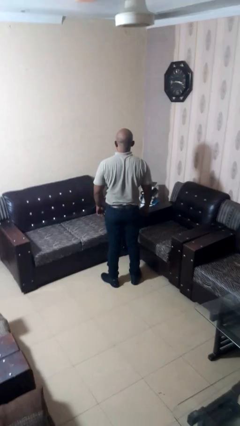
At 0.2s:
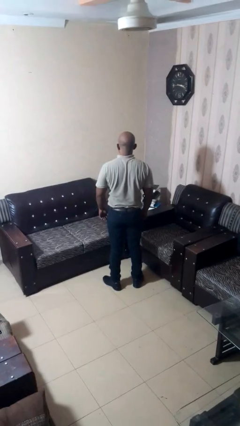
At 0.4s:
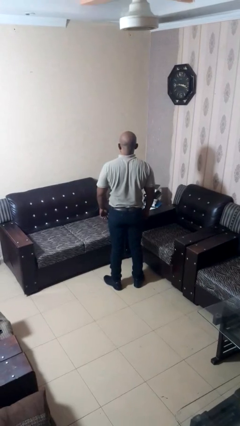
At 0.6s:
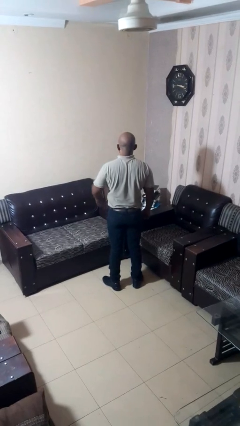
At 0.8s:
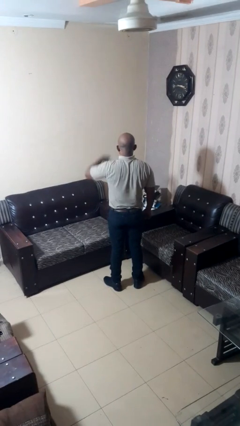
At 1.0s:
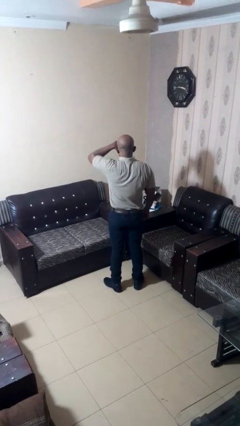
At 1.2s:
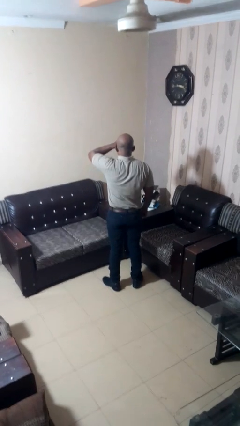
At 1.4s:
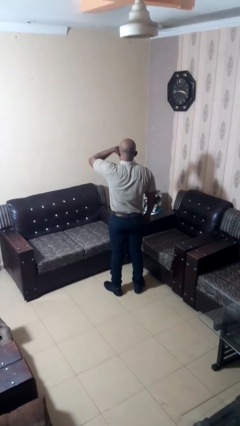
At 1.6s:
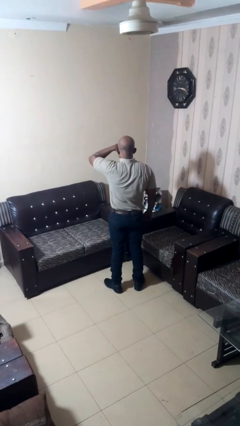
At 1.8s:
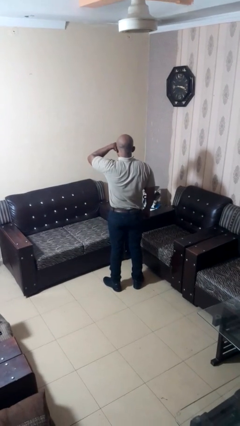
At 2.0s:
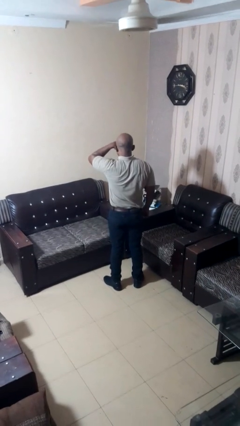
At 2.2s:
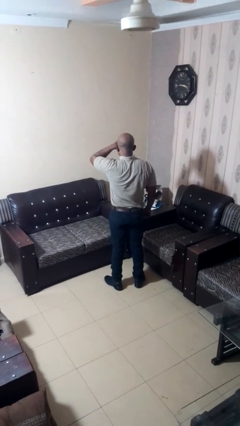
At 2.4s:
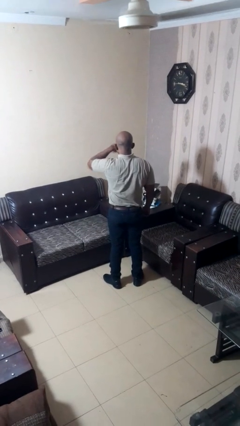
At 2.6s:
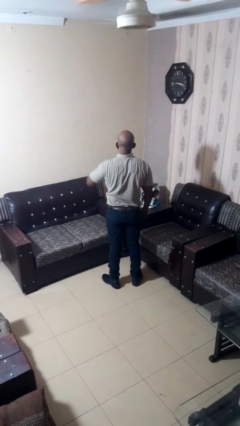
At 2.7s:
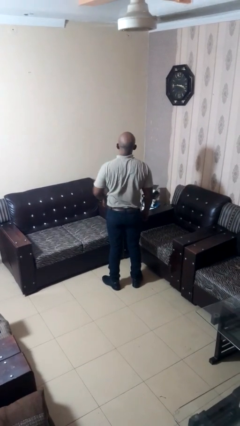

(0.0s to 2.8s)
person rubs eyes

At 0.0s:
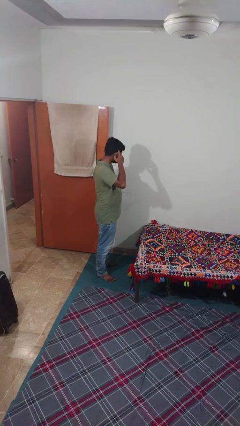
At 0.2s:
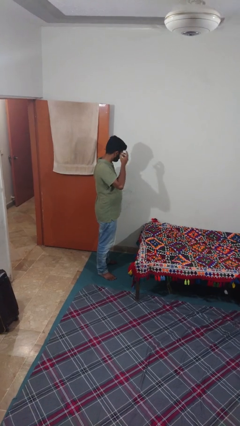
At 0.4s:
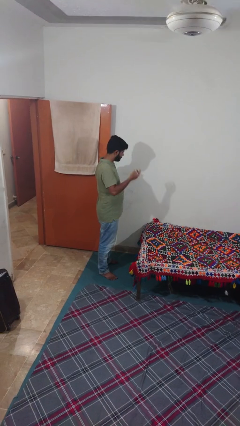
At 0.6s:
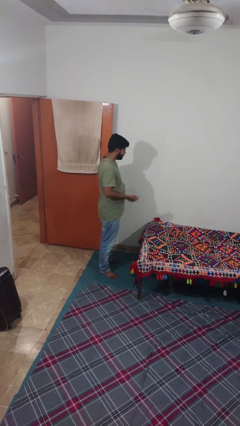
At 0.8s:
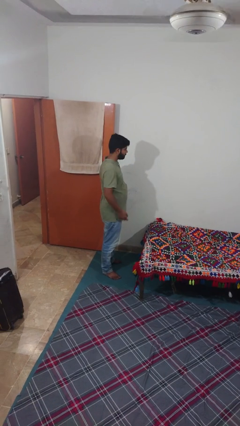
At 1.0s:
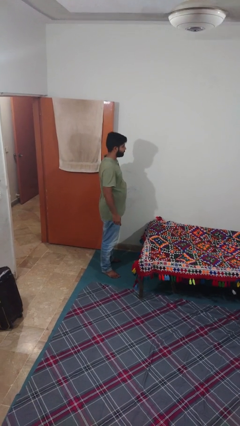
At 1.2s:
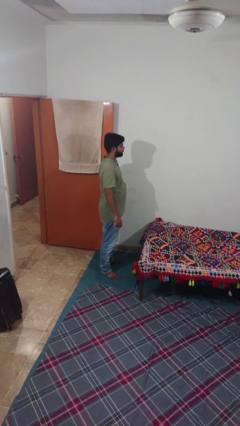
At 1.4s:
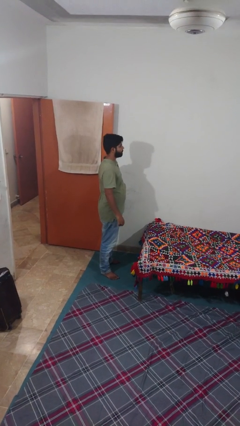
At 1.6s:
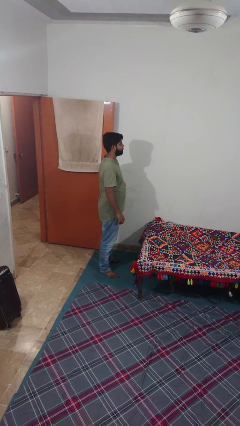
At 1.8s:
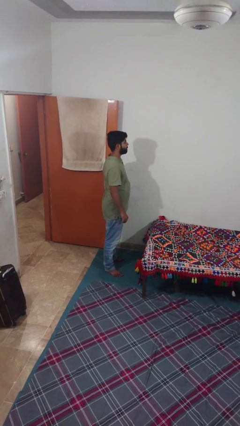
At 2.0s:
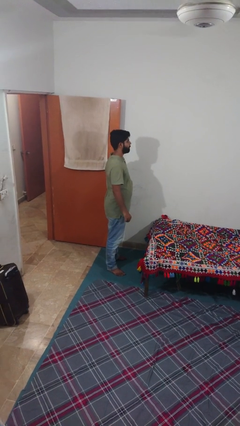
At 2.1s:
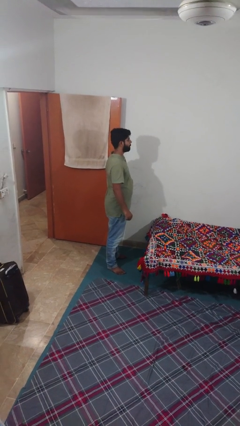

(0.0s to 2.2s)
person takes off earrings

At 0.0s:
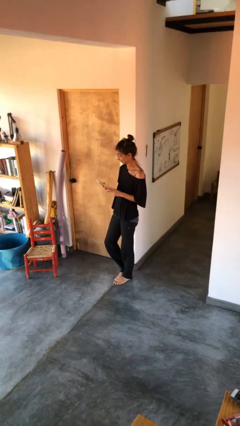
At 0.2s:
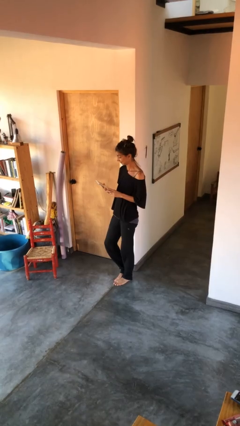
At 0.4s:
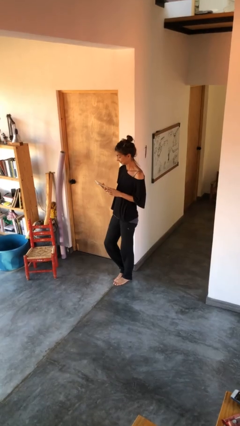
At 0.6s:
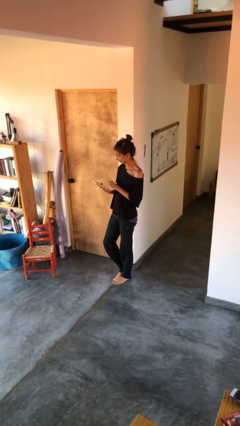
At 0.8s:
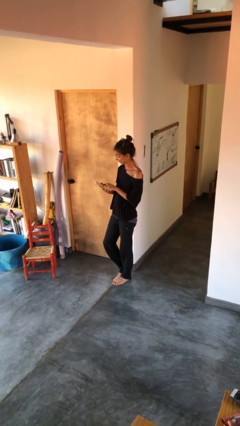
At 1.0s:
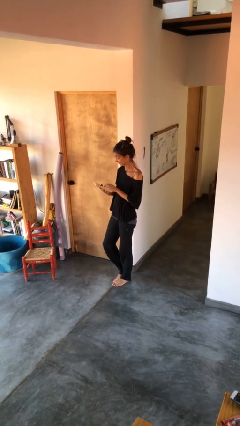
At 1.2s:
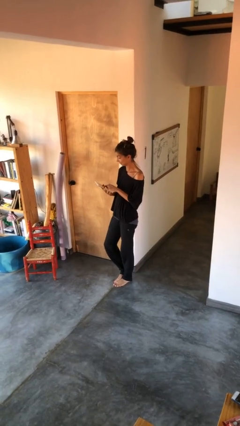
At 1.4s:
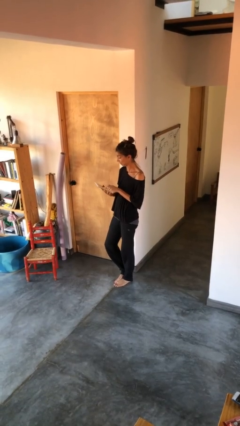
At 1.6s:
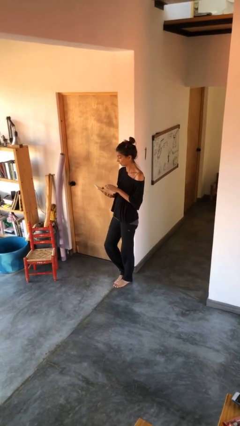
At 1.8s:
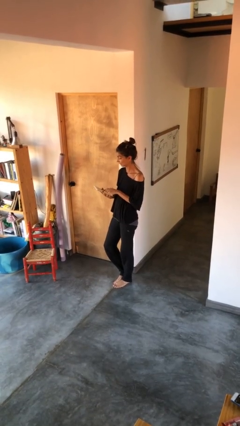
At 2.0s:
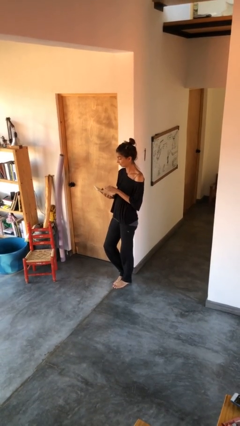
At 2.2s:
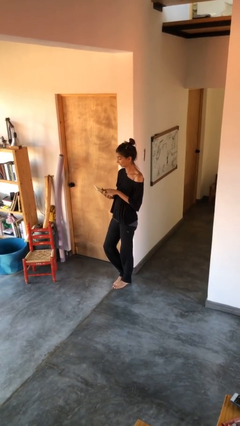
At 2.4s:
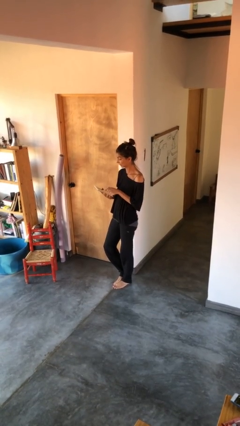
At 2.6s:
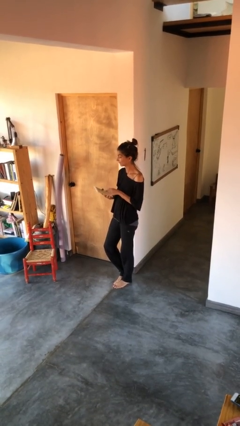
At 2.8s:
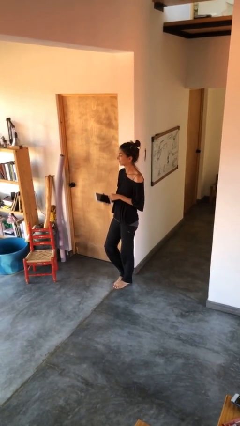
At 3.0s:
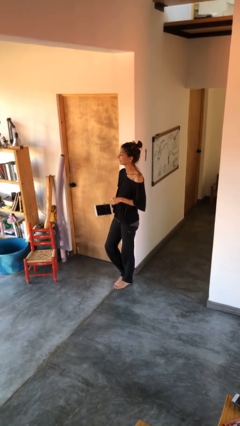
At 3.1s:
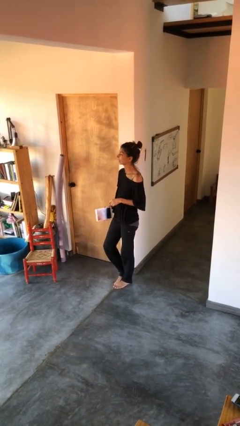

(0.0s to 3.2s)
person interacts with tablet

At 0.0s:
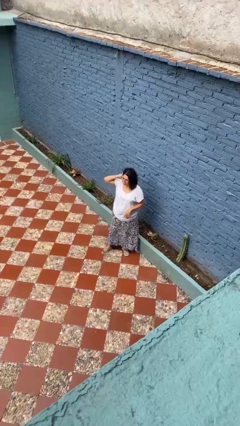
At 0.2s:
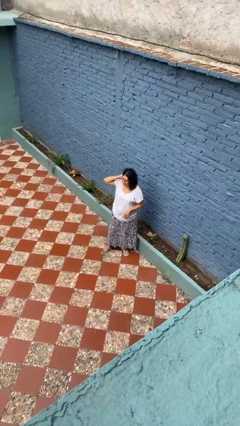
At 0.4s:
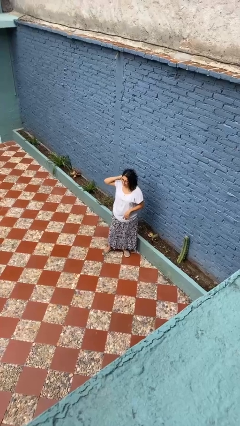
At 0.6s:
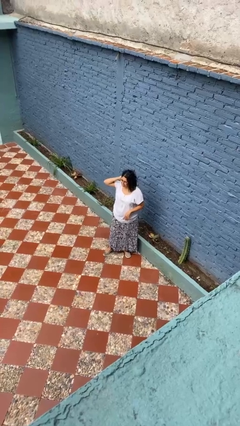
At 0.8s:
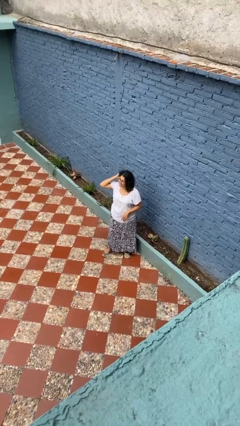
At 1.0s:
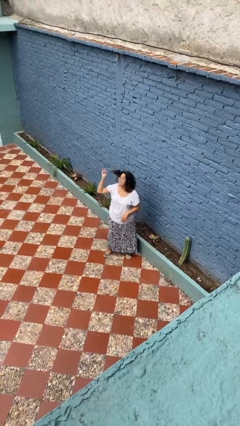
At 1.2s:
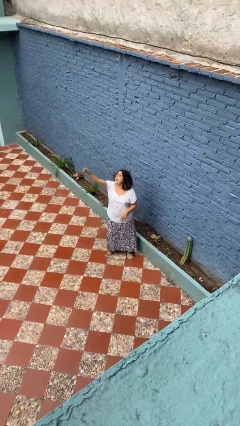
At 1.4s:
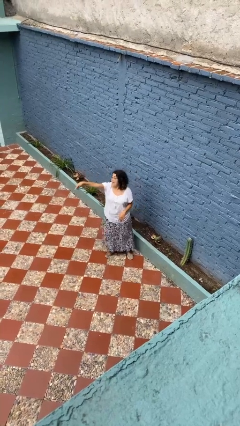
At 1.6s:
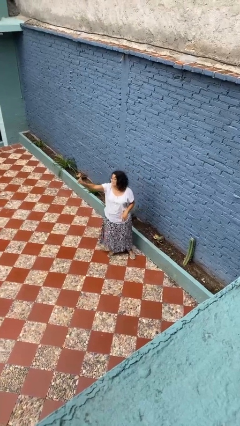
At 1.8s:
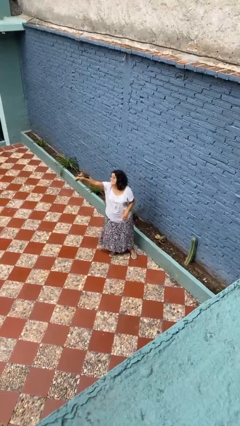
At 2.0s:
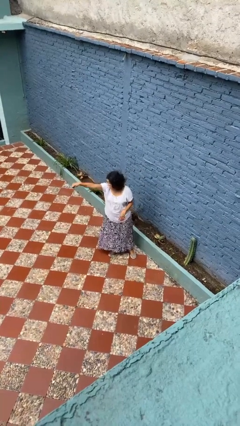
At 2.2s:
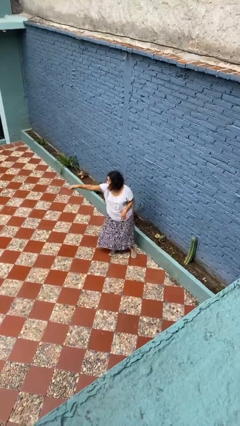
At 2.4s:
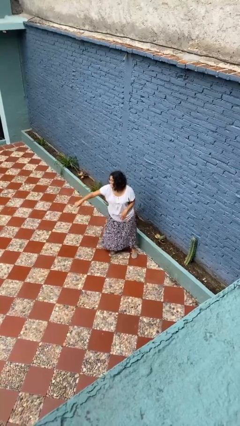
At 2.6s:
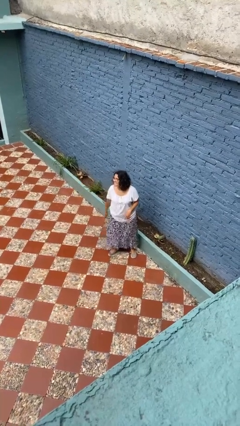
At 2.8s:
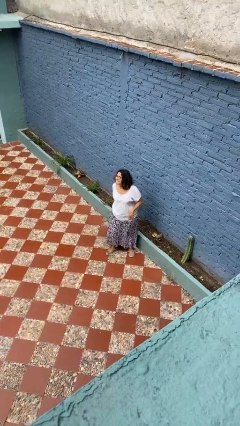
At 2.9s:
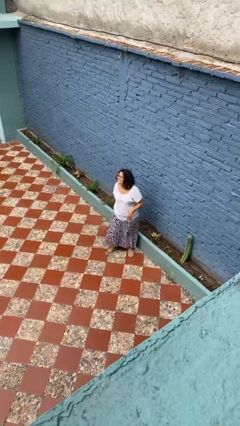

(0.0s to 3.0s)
person points at person

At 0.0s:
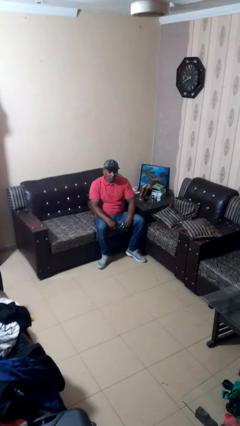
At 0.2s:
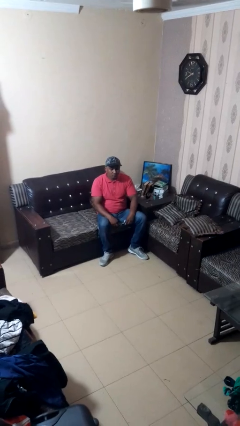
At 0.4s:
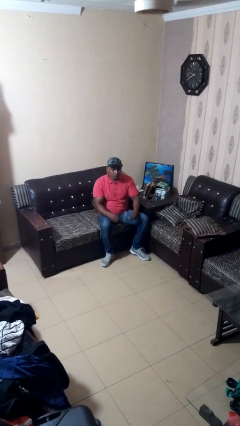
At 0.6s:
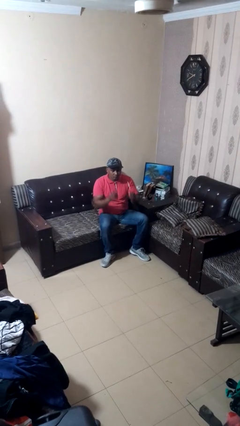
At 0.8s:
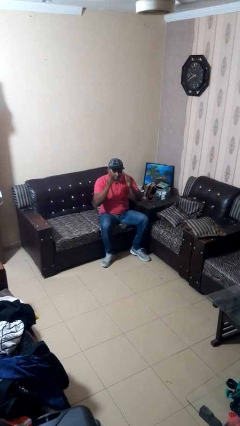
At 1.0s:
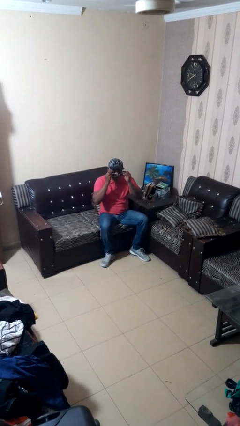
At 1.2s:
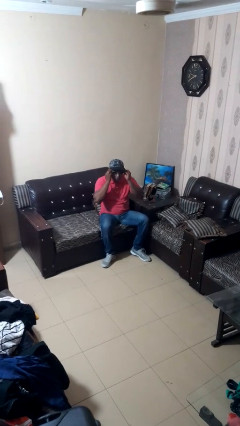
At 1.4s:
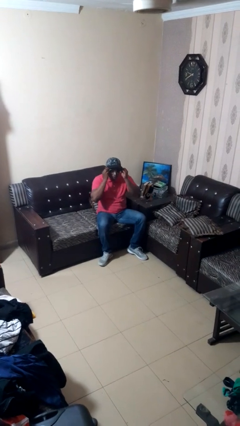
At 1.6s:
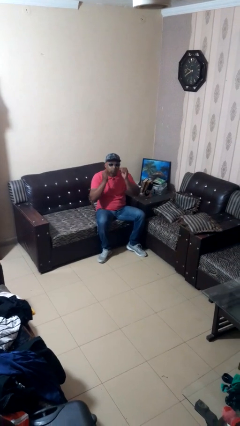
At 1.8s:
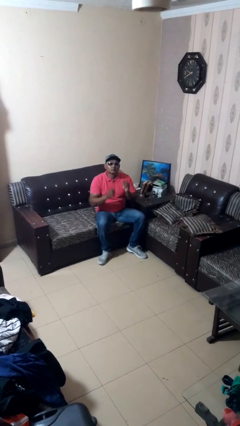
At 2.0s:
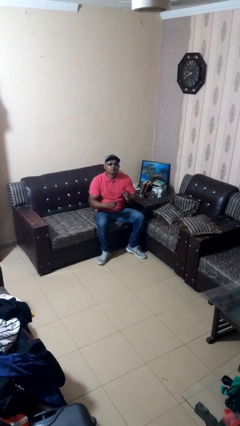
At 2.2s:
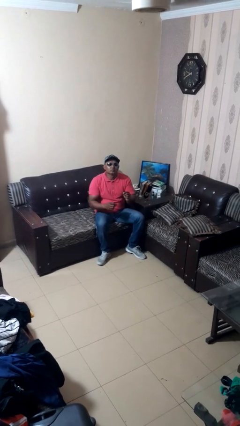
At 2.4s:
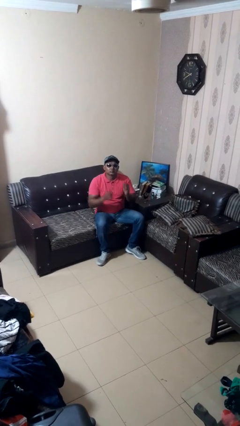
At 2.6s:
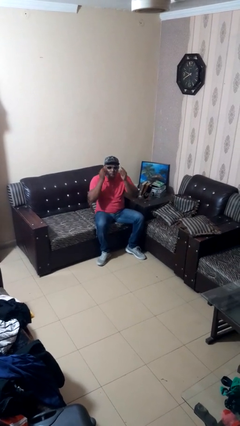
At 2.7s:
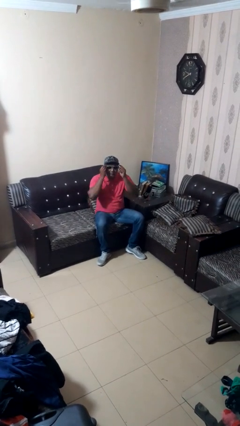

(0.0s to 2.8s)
person puts on sunglasses

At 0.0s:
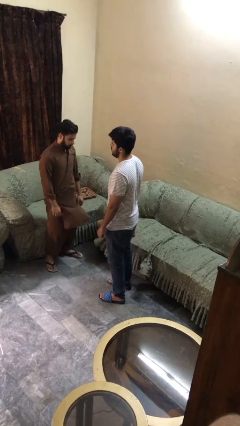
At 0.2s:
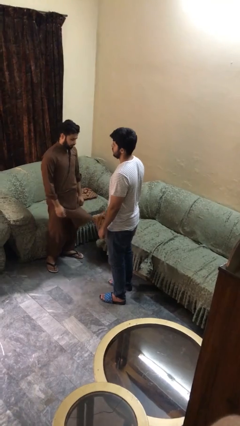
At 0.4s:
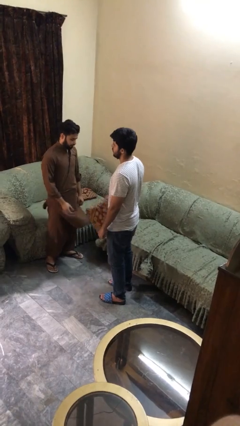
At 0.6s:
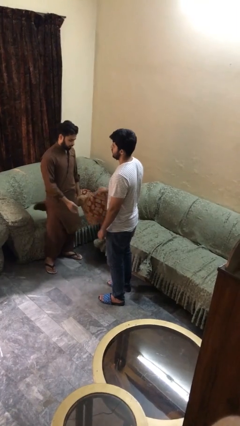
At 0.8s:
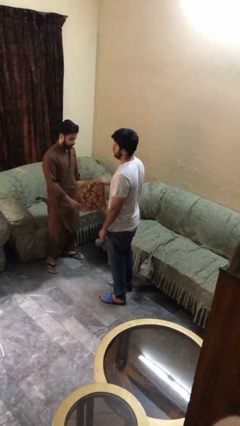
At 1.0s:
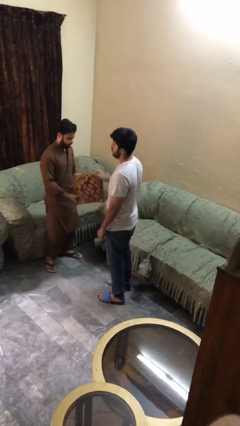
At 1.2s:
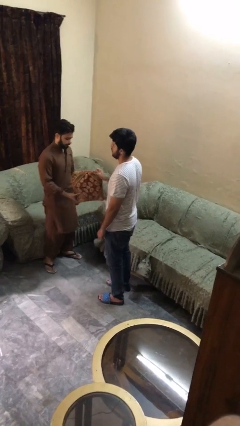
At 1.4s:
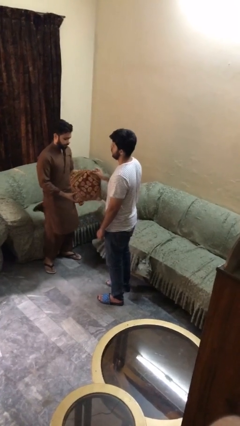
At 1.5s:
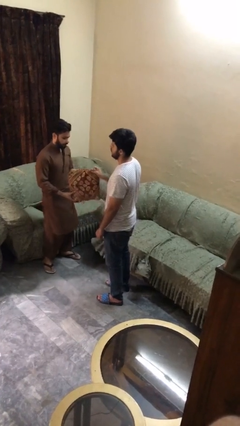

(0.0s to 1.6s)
person transfers object to person

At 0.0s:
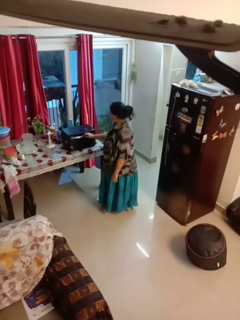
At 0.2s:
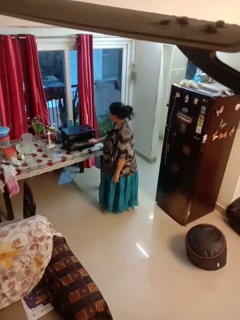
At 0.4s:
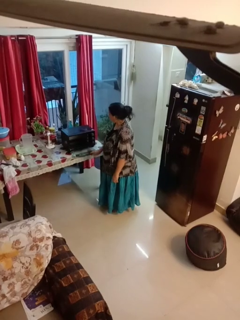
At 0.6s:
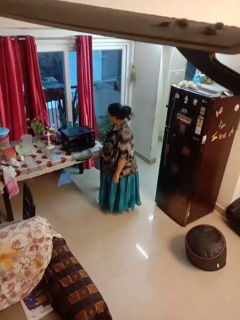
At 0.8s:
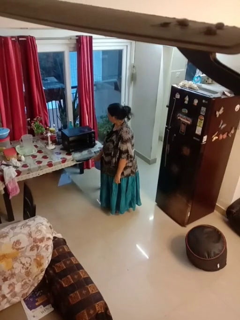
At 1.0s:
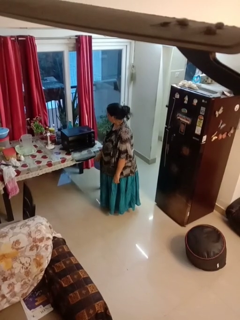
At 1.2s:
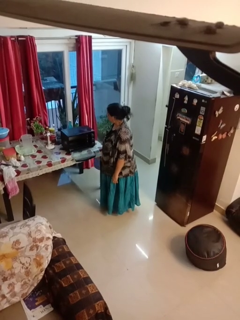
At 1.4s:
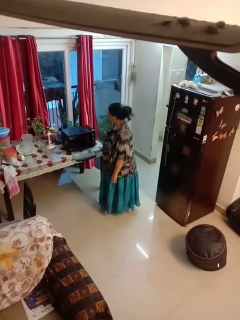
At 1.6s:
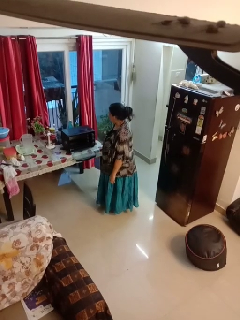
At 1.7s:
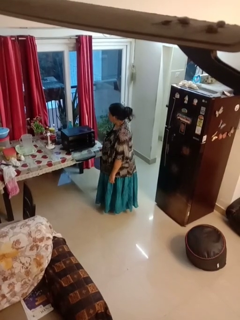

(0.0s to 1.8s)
person opens microwave

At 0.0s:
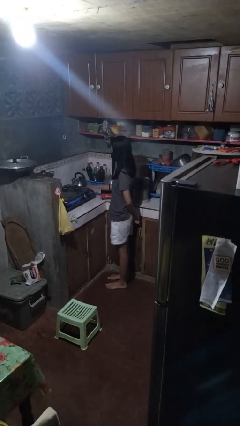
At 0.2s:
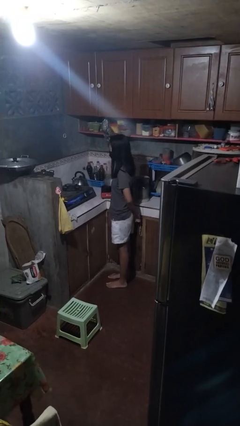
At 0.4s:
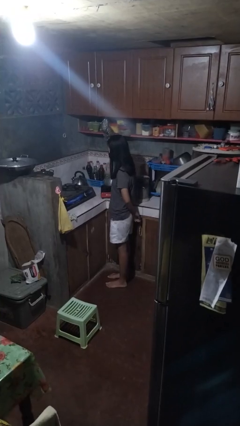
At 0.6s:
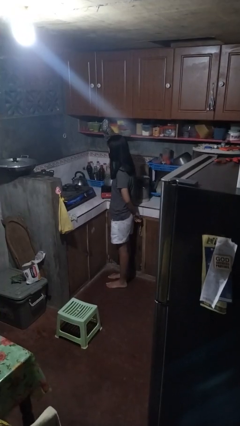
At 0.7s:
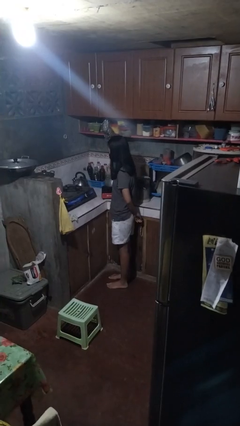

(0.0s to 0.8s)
person burns hand
